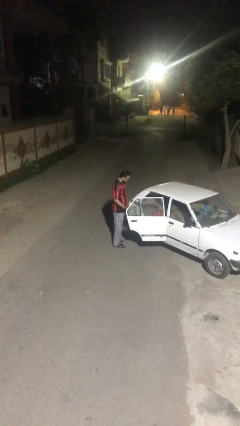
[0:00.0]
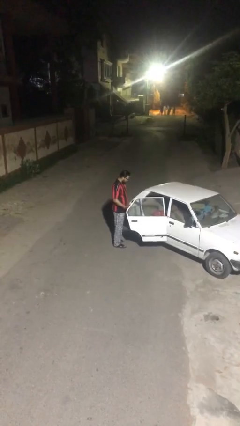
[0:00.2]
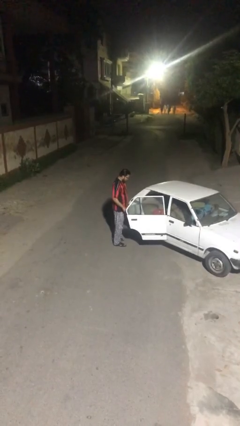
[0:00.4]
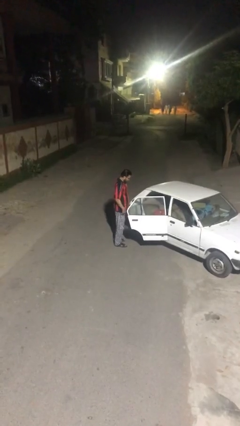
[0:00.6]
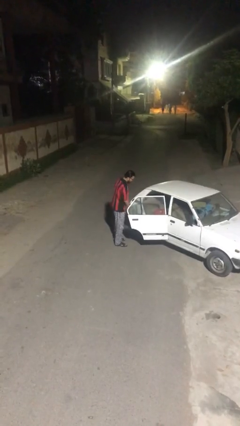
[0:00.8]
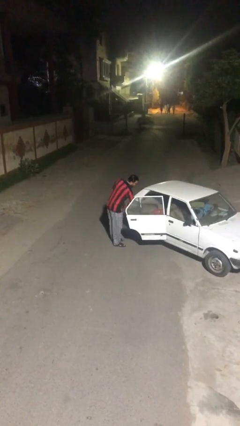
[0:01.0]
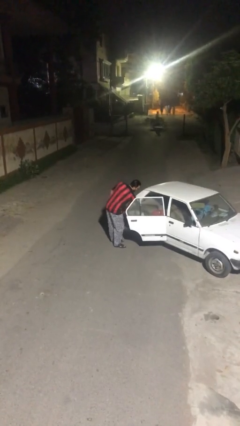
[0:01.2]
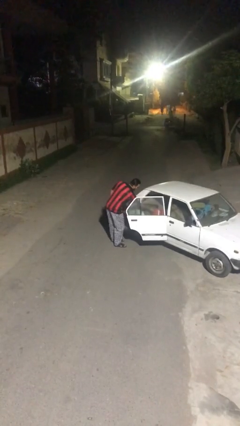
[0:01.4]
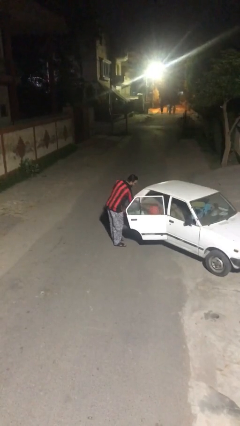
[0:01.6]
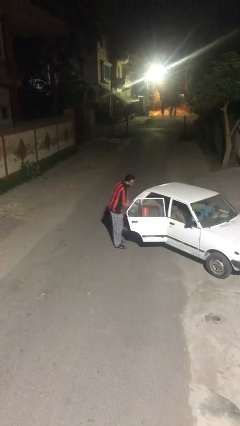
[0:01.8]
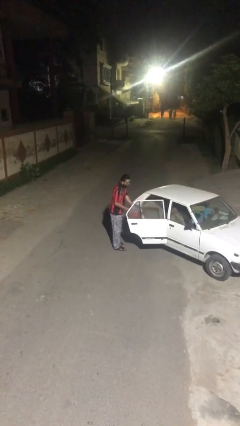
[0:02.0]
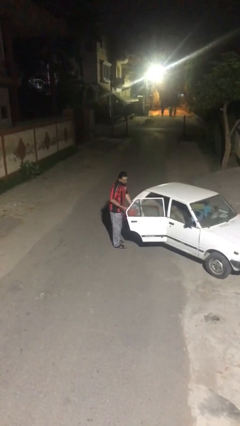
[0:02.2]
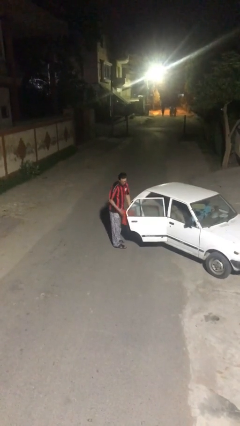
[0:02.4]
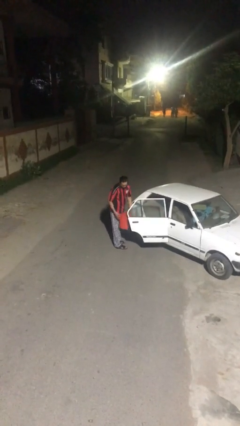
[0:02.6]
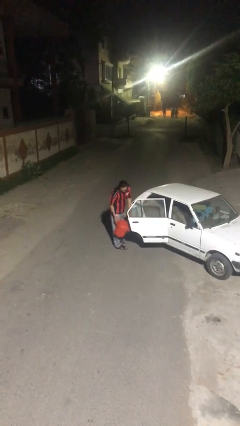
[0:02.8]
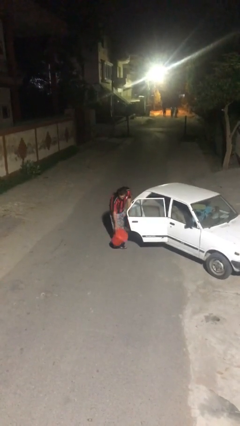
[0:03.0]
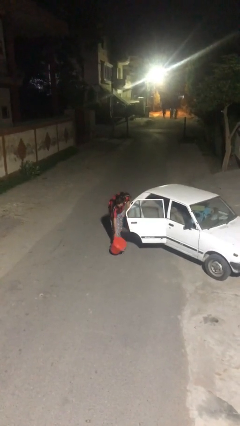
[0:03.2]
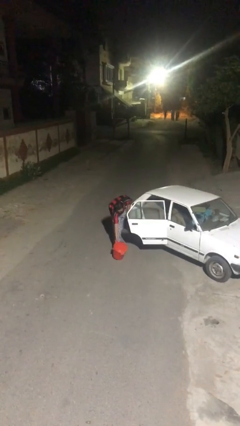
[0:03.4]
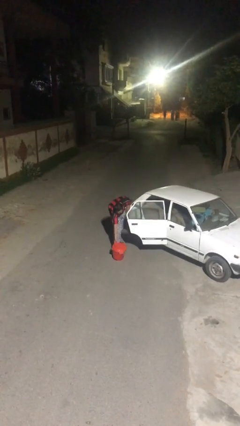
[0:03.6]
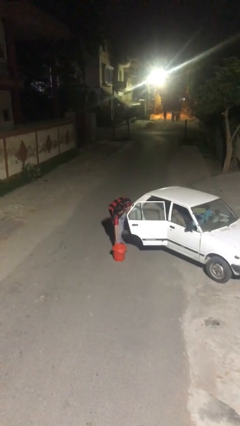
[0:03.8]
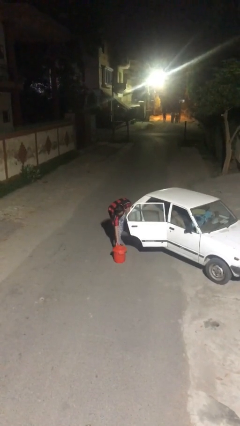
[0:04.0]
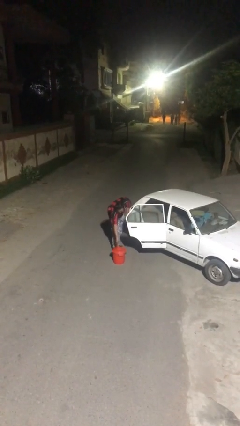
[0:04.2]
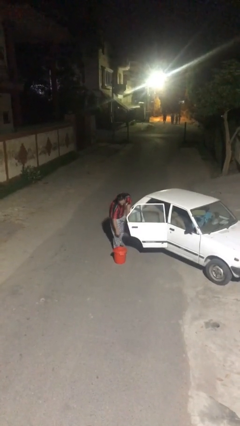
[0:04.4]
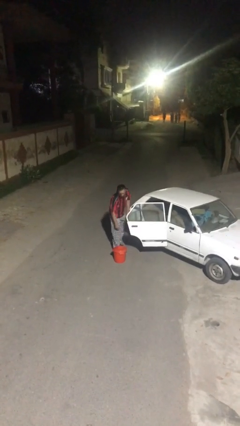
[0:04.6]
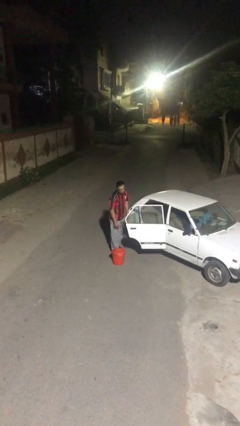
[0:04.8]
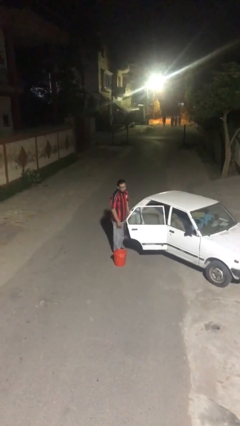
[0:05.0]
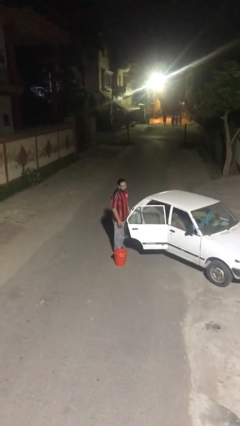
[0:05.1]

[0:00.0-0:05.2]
person unloads car

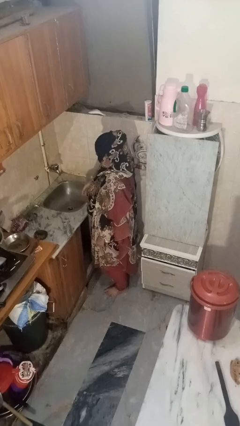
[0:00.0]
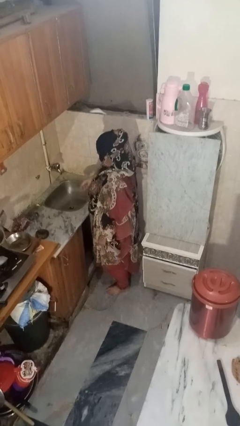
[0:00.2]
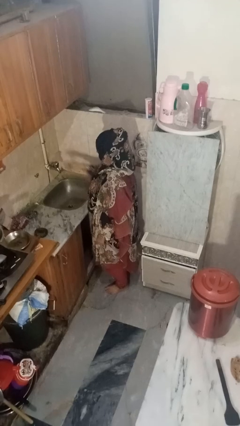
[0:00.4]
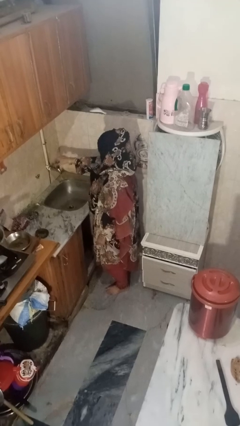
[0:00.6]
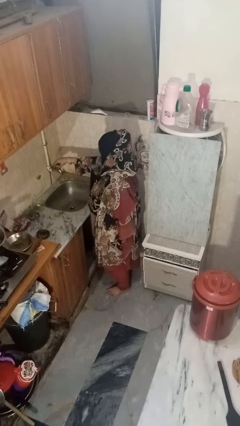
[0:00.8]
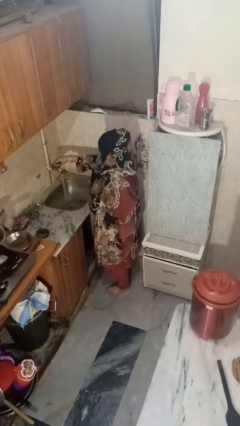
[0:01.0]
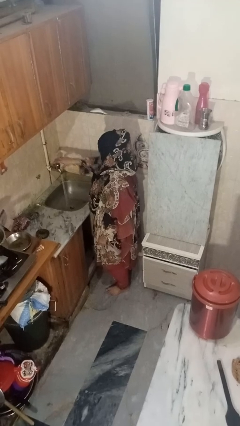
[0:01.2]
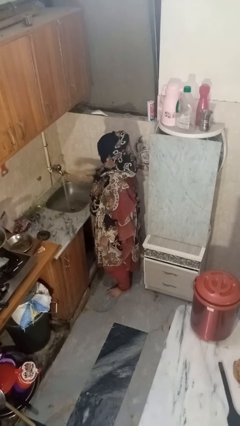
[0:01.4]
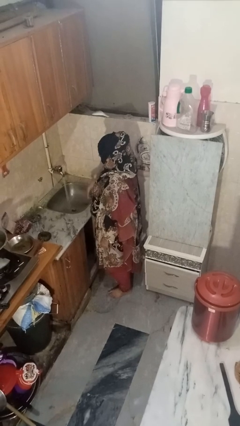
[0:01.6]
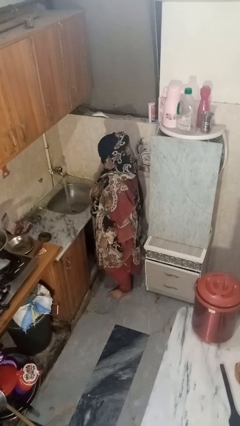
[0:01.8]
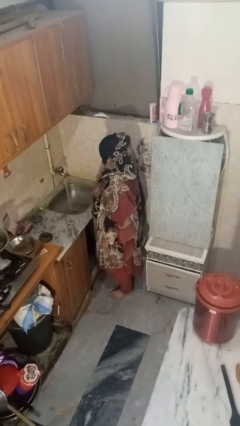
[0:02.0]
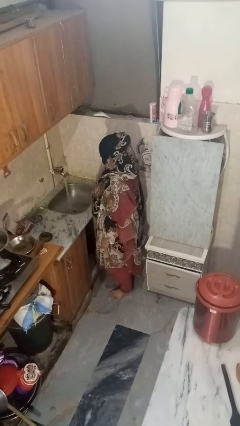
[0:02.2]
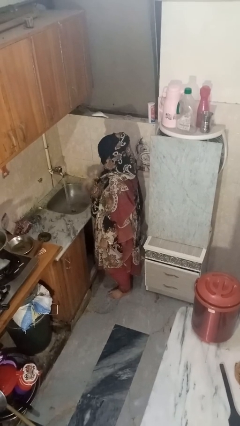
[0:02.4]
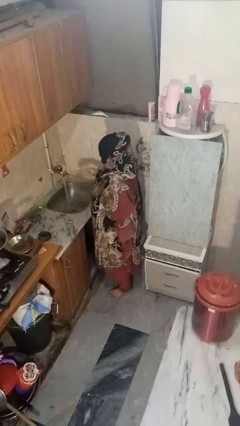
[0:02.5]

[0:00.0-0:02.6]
person turns on faucet

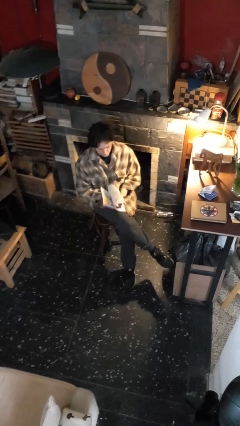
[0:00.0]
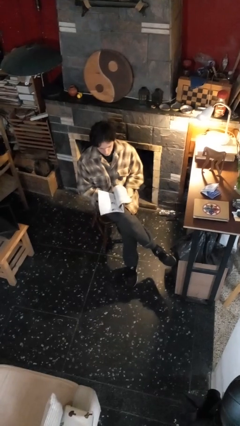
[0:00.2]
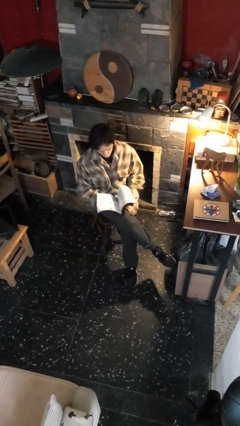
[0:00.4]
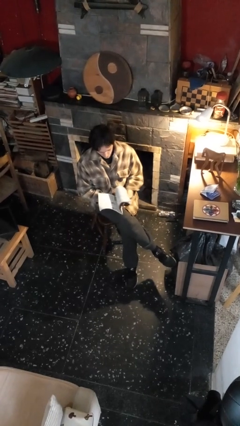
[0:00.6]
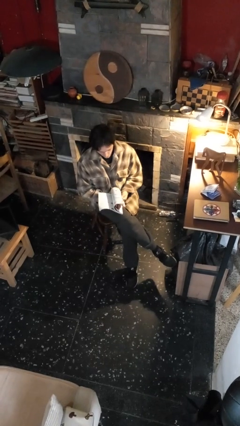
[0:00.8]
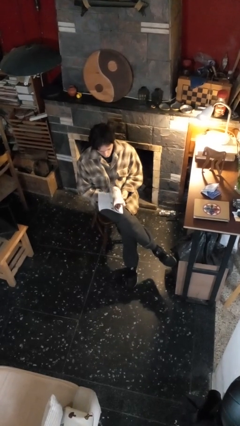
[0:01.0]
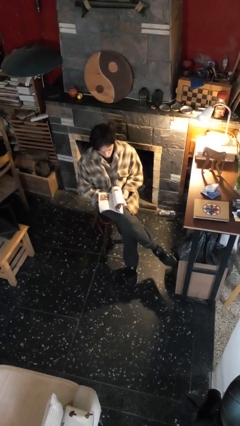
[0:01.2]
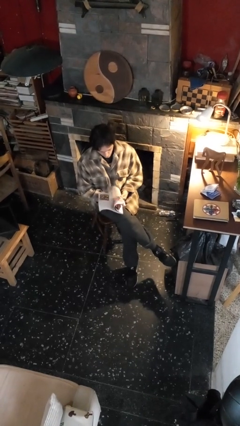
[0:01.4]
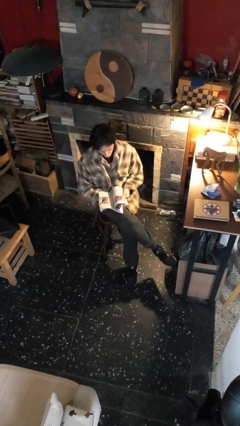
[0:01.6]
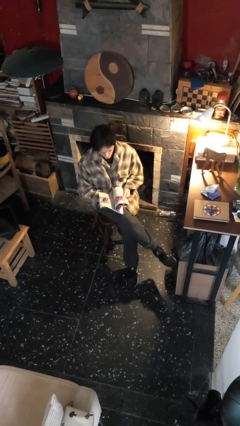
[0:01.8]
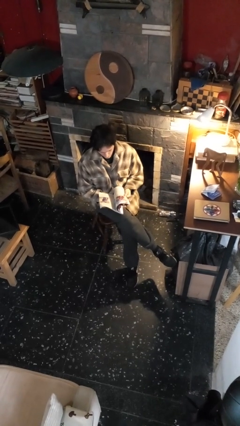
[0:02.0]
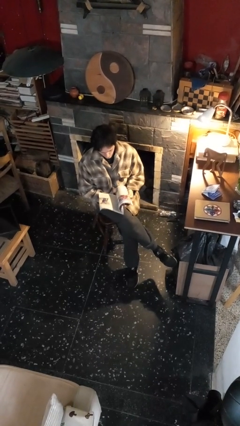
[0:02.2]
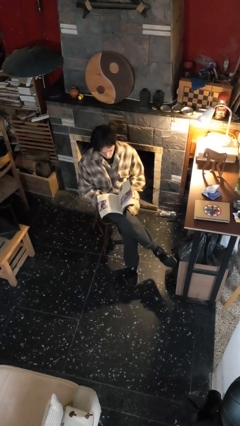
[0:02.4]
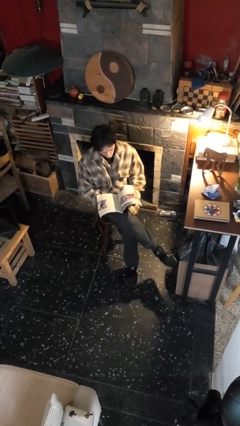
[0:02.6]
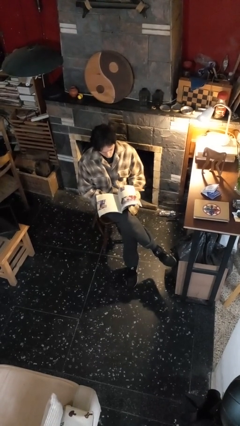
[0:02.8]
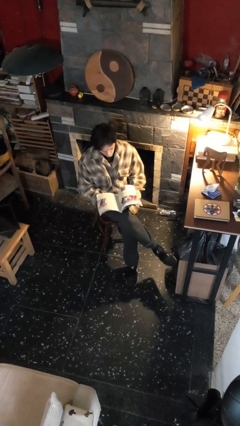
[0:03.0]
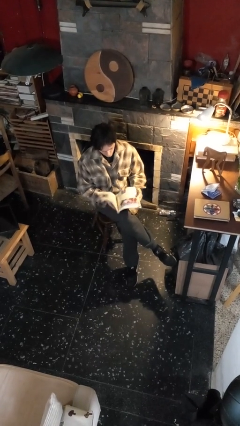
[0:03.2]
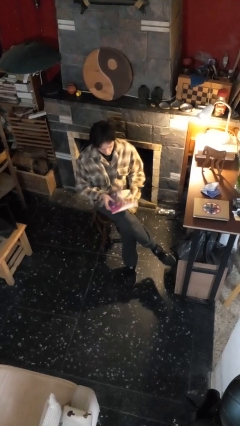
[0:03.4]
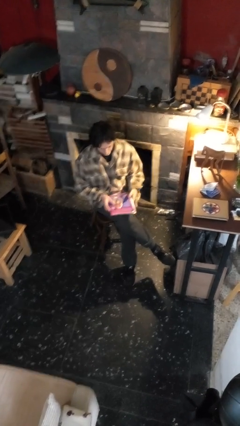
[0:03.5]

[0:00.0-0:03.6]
person reads magazine

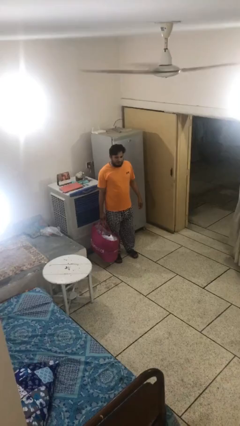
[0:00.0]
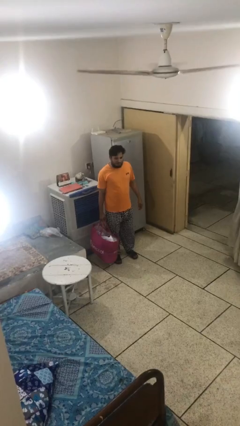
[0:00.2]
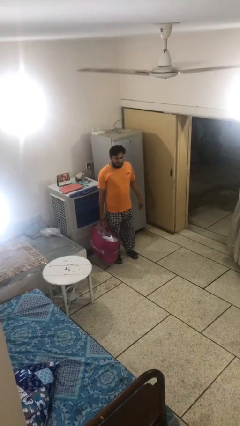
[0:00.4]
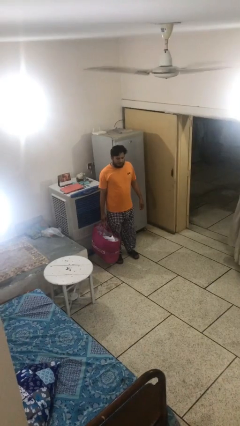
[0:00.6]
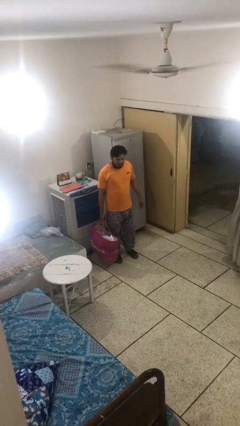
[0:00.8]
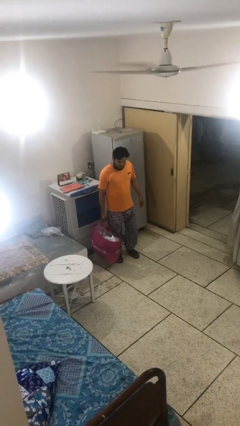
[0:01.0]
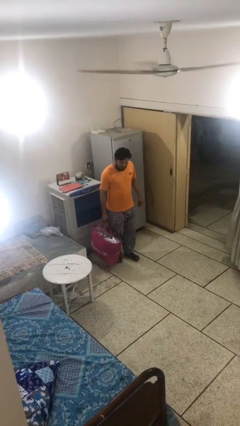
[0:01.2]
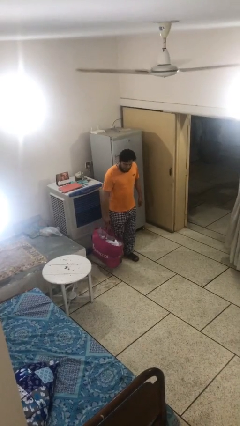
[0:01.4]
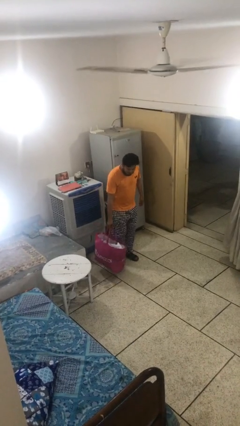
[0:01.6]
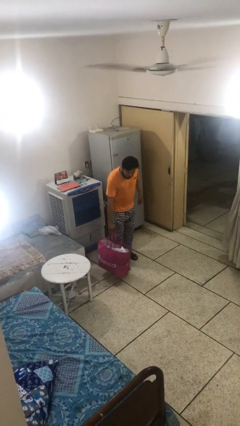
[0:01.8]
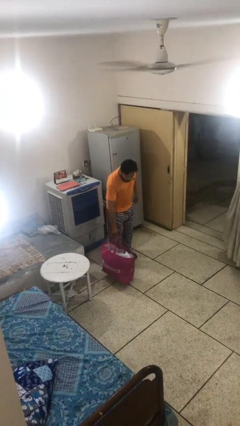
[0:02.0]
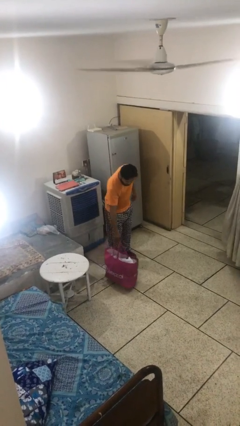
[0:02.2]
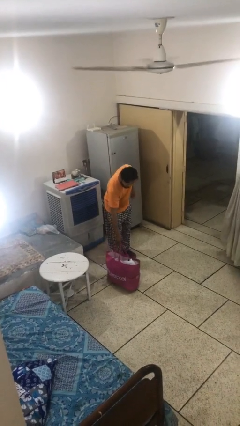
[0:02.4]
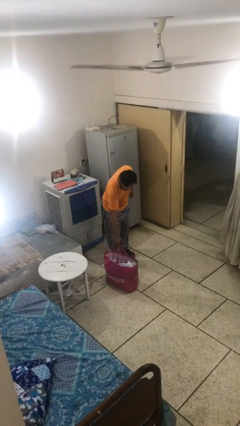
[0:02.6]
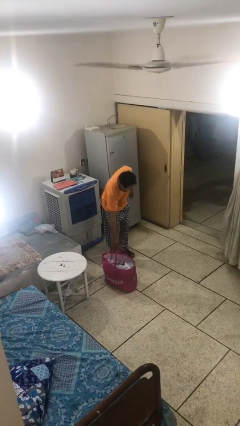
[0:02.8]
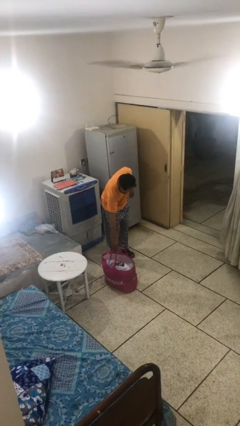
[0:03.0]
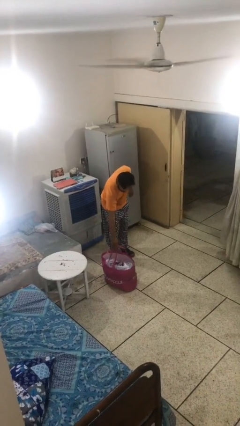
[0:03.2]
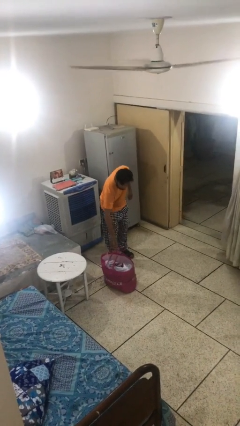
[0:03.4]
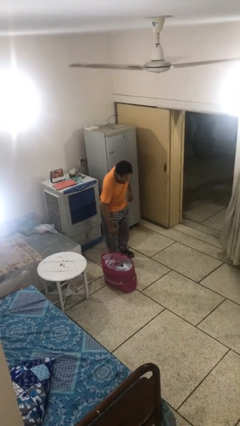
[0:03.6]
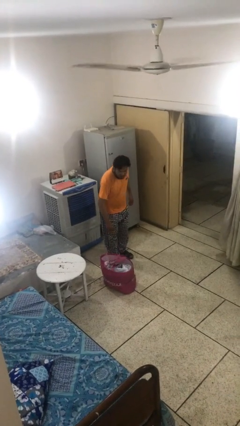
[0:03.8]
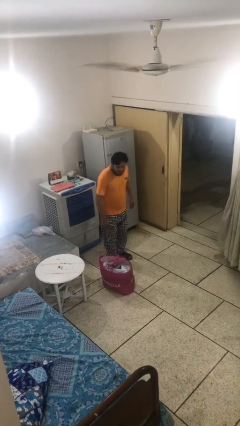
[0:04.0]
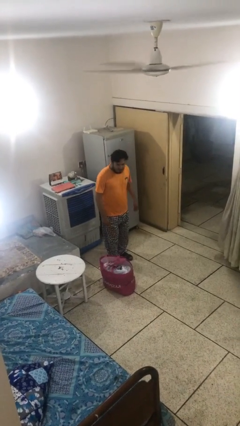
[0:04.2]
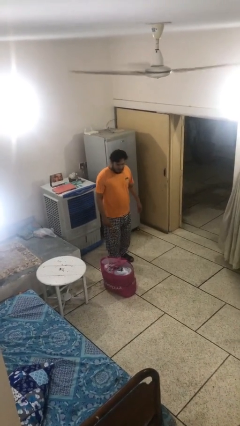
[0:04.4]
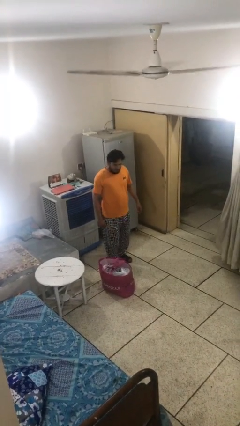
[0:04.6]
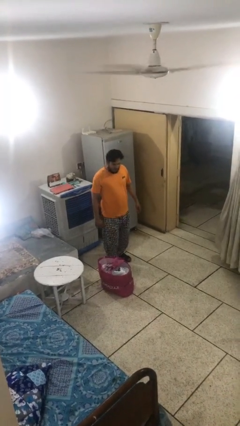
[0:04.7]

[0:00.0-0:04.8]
person puts down object on floor

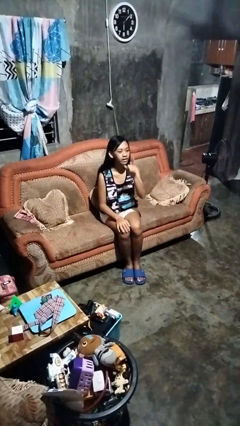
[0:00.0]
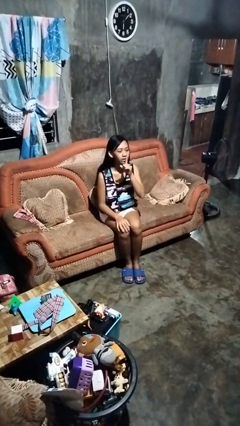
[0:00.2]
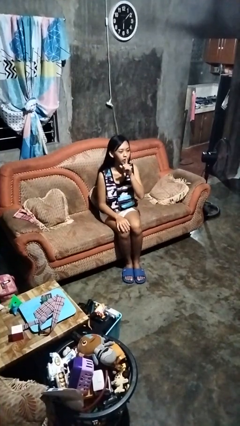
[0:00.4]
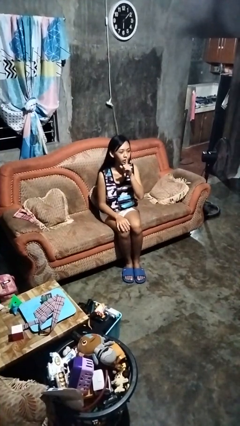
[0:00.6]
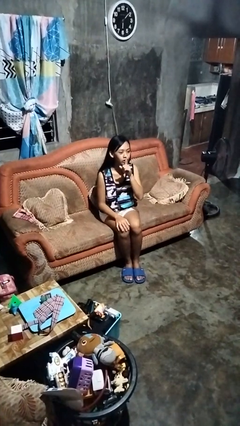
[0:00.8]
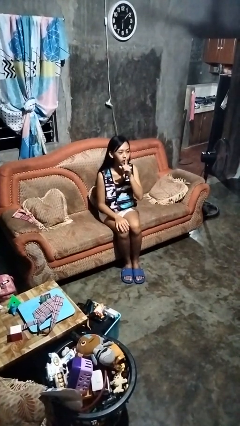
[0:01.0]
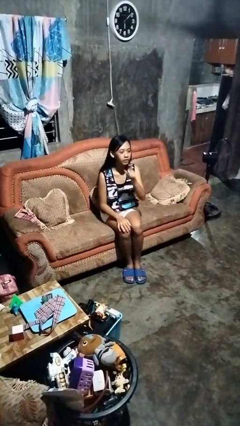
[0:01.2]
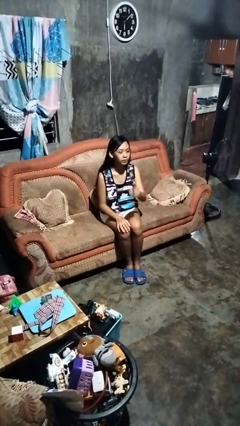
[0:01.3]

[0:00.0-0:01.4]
person gestures be quiet
